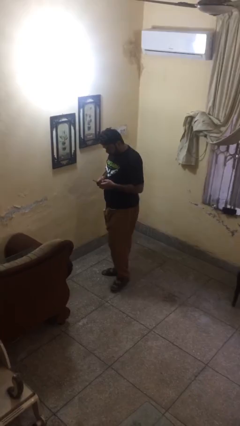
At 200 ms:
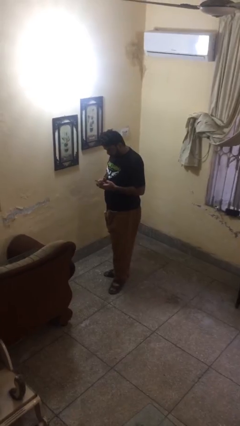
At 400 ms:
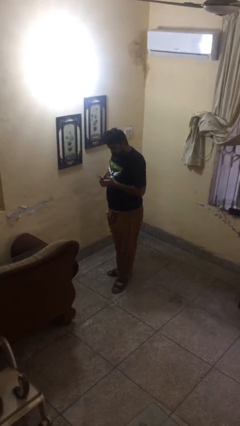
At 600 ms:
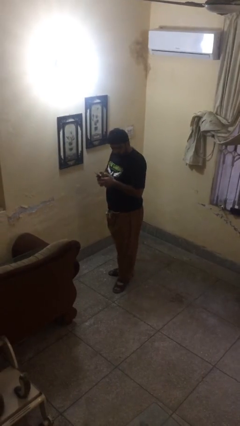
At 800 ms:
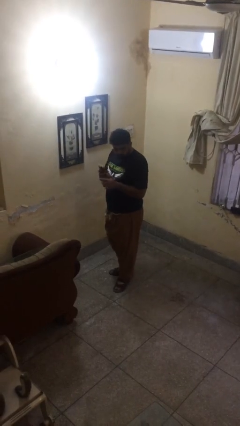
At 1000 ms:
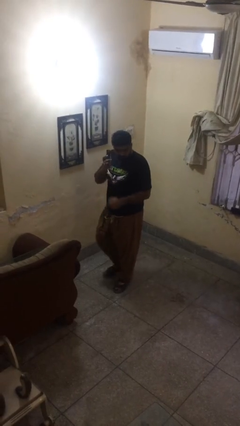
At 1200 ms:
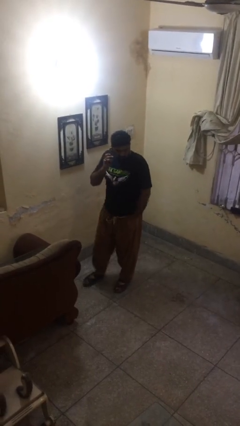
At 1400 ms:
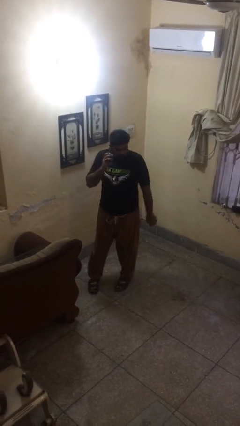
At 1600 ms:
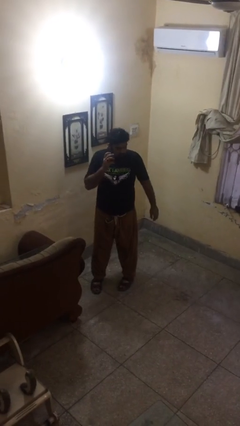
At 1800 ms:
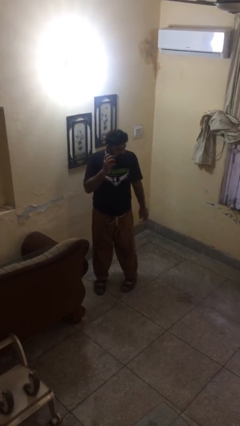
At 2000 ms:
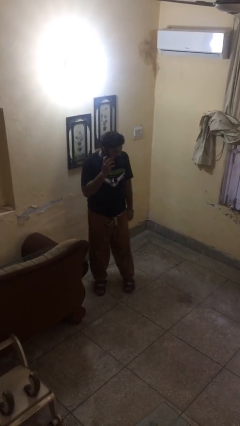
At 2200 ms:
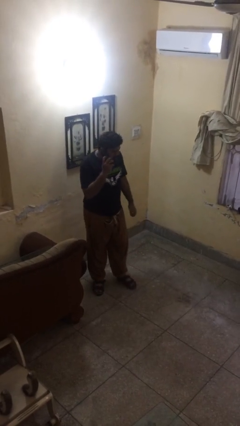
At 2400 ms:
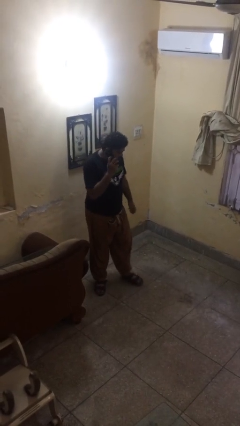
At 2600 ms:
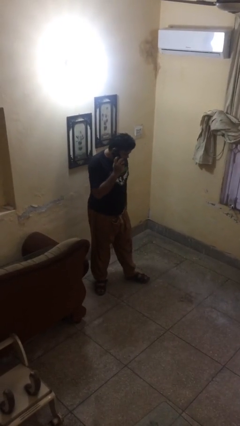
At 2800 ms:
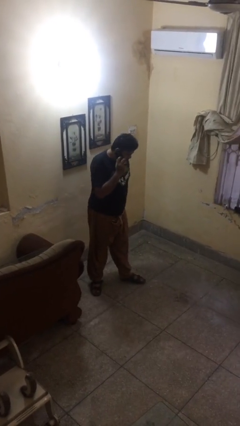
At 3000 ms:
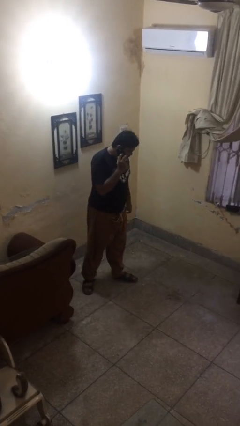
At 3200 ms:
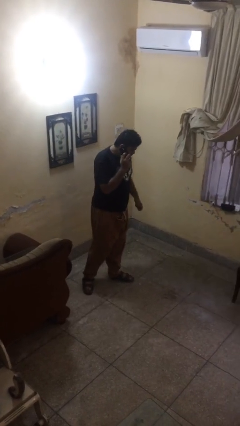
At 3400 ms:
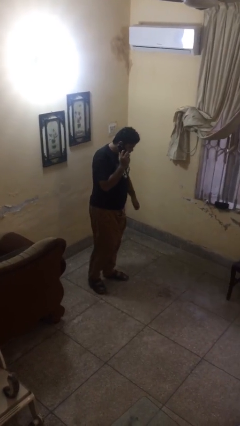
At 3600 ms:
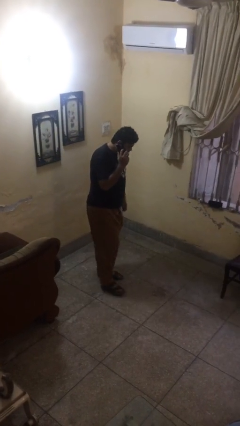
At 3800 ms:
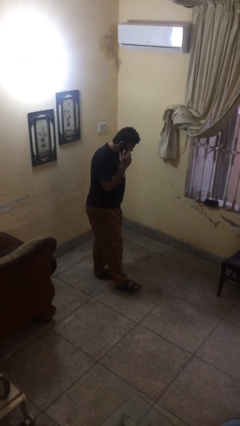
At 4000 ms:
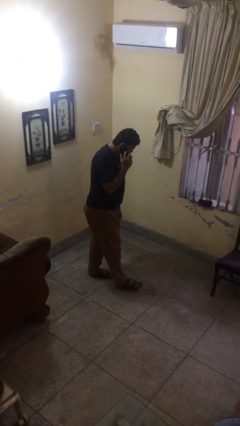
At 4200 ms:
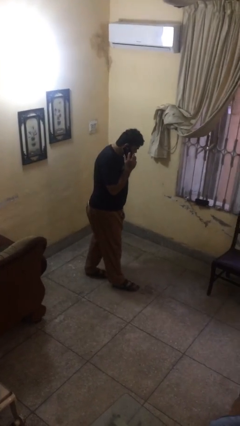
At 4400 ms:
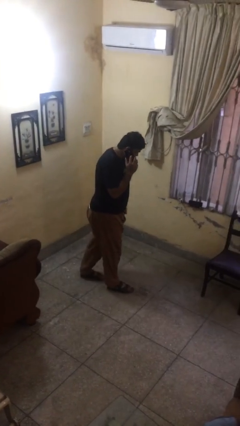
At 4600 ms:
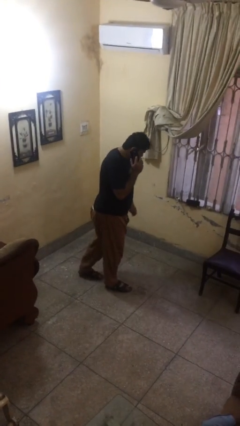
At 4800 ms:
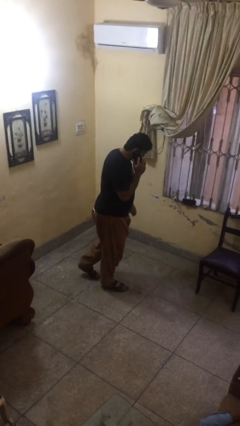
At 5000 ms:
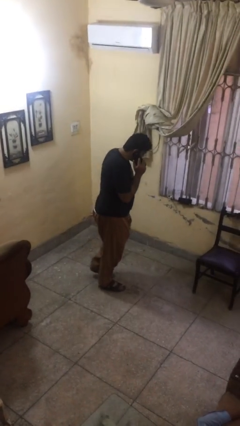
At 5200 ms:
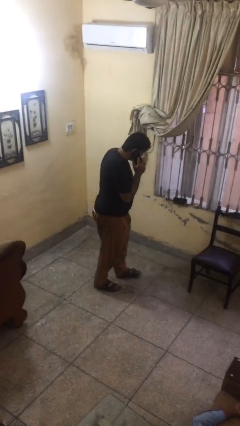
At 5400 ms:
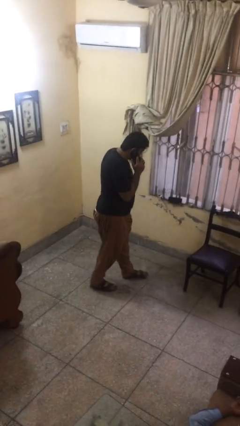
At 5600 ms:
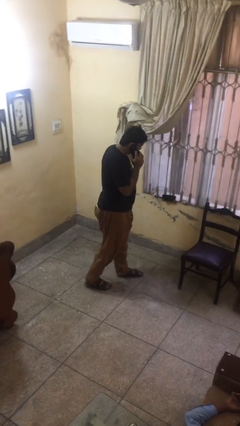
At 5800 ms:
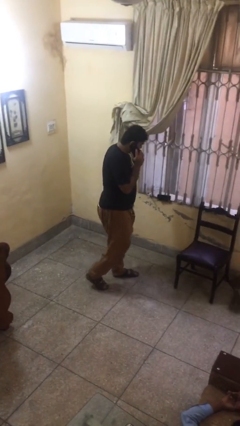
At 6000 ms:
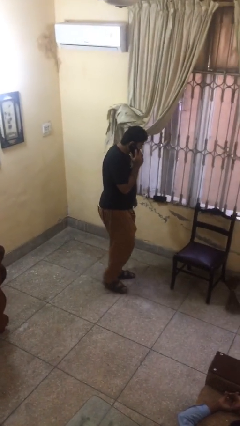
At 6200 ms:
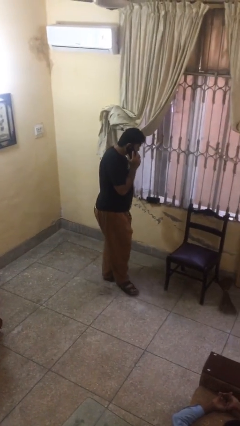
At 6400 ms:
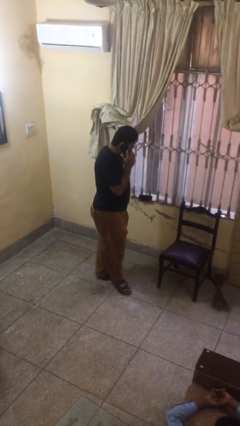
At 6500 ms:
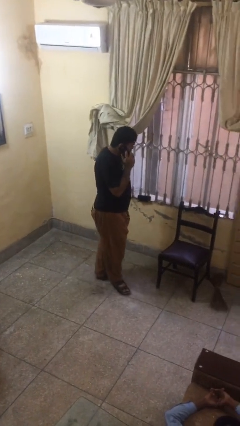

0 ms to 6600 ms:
person talks on phone

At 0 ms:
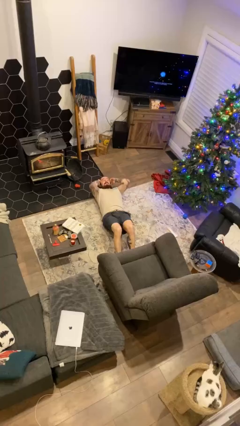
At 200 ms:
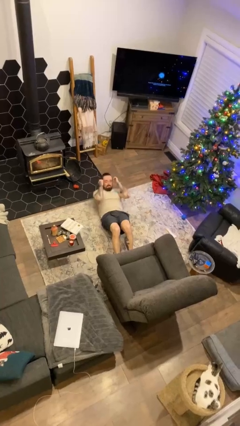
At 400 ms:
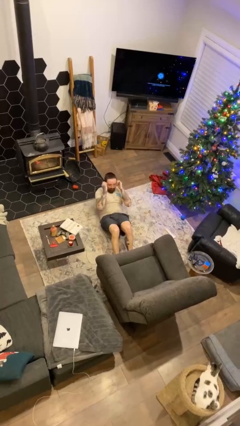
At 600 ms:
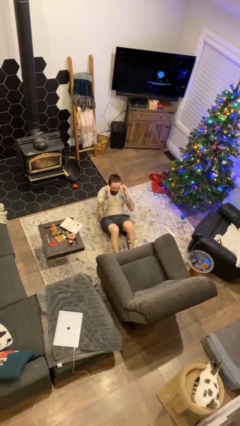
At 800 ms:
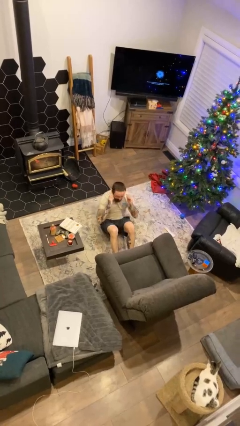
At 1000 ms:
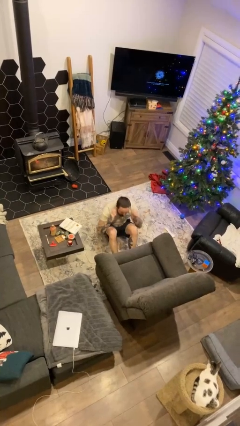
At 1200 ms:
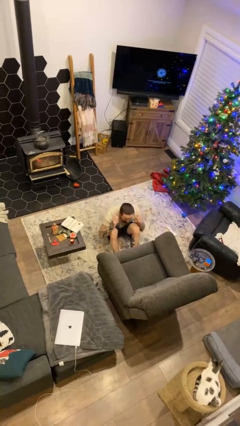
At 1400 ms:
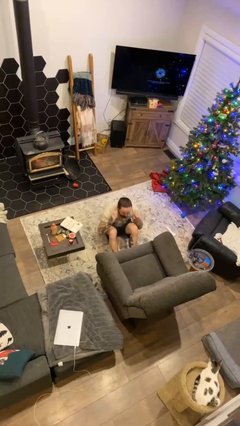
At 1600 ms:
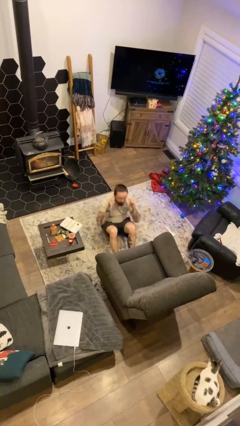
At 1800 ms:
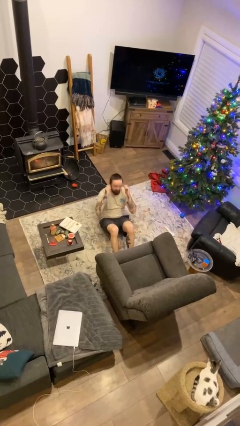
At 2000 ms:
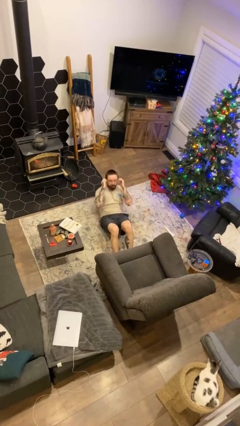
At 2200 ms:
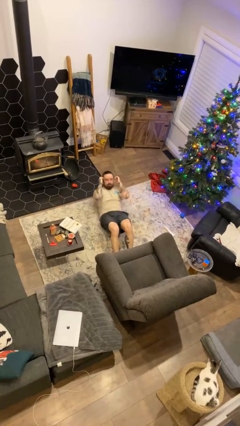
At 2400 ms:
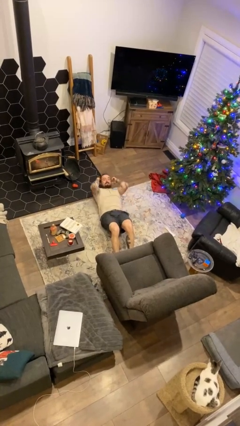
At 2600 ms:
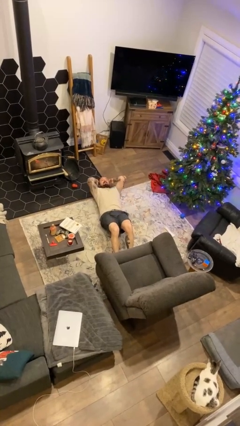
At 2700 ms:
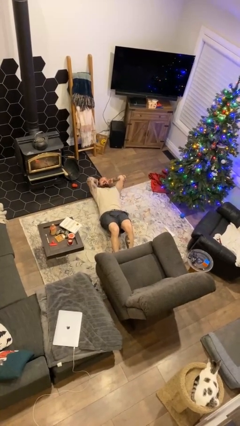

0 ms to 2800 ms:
person exercises with situp

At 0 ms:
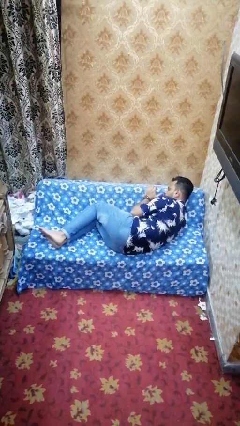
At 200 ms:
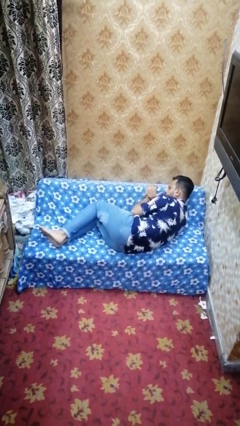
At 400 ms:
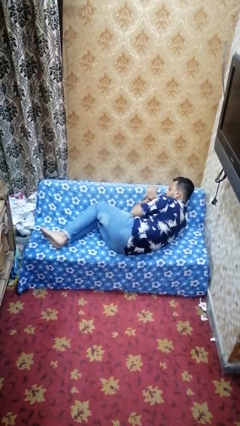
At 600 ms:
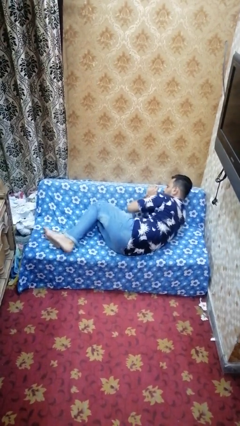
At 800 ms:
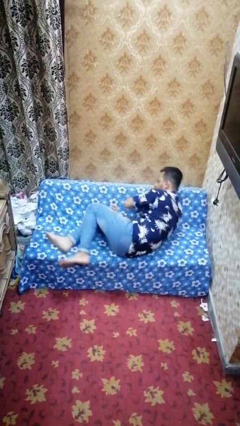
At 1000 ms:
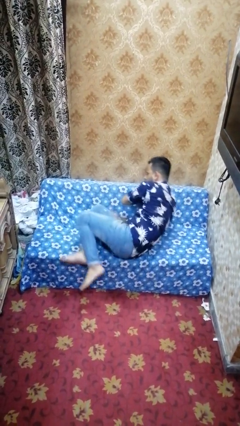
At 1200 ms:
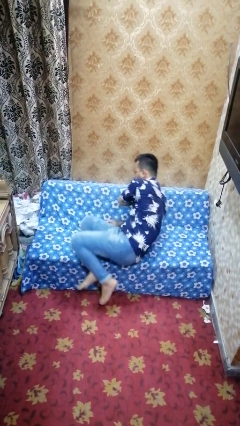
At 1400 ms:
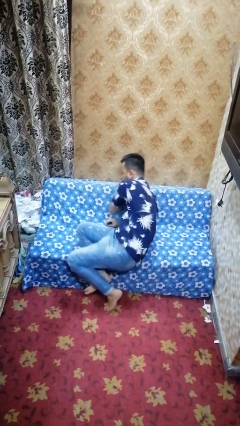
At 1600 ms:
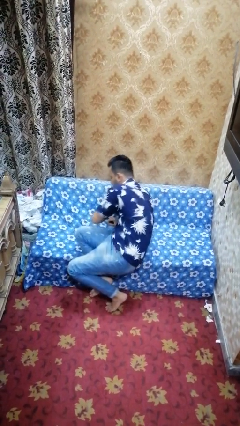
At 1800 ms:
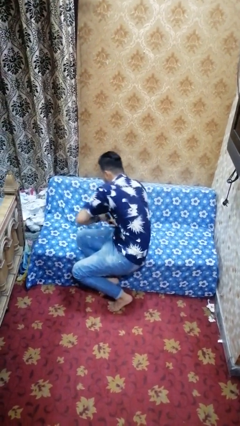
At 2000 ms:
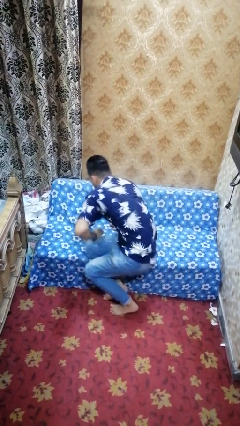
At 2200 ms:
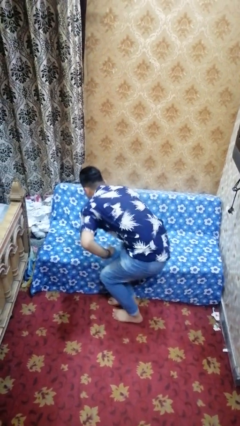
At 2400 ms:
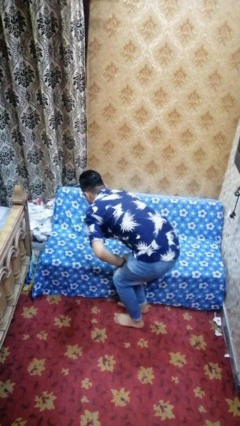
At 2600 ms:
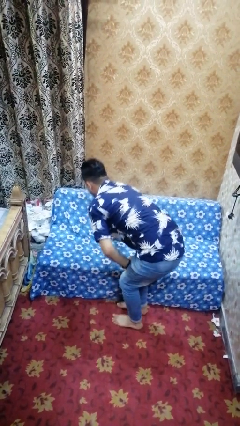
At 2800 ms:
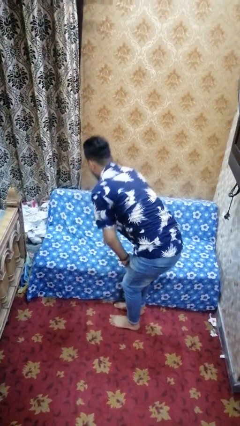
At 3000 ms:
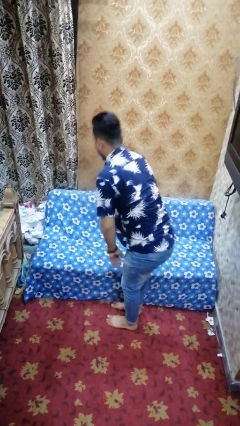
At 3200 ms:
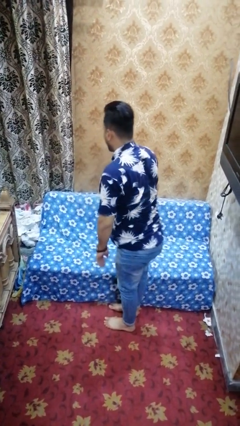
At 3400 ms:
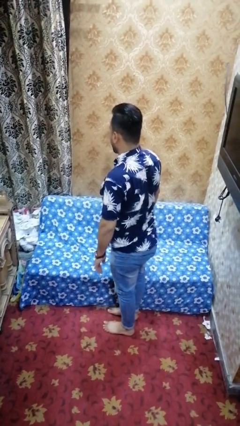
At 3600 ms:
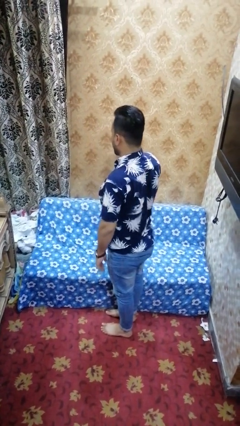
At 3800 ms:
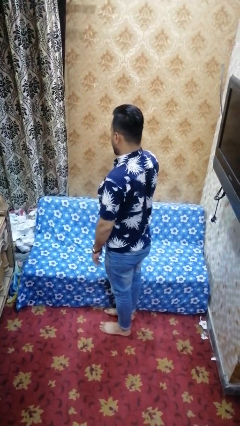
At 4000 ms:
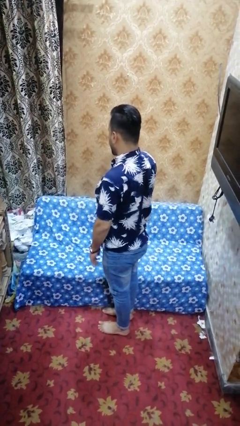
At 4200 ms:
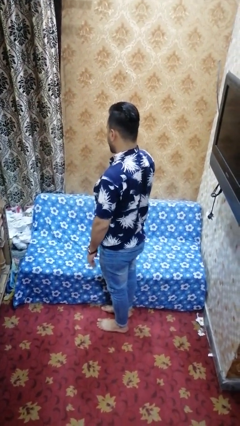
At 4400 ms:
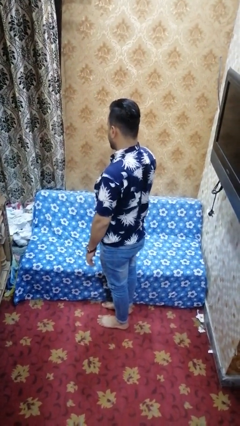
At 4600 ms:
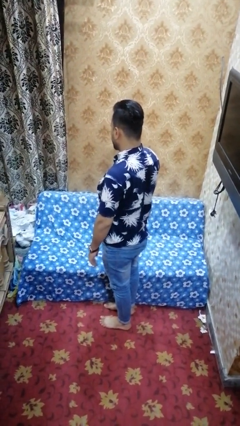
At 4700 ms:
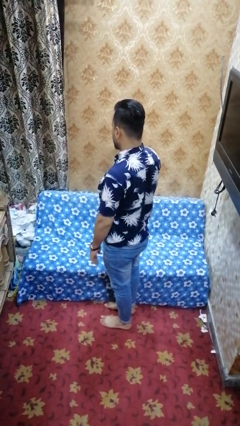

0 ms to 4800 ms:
person stands up

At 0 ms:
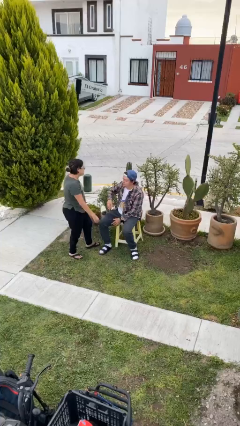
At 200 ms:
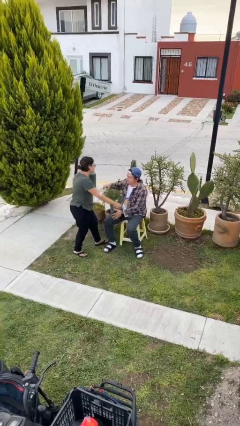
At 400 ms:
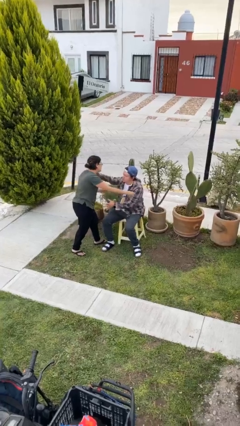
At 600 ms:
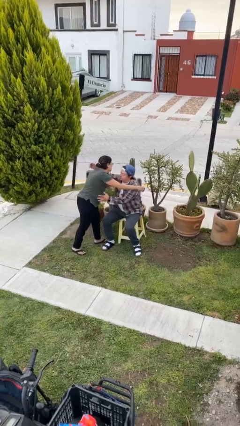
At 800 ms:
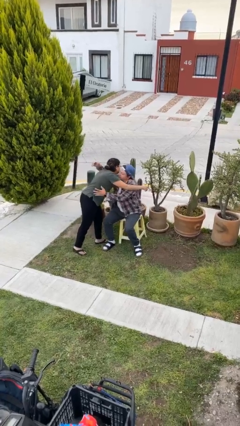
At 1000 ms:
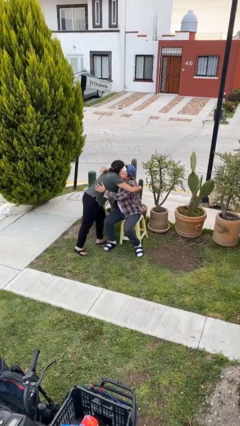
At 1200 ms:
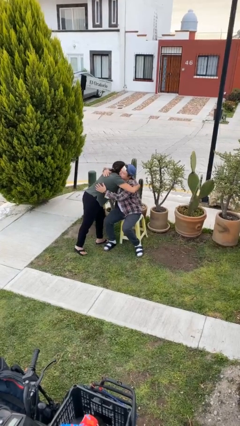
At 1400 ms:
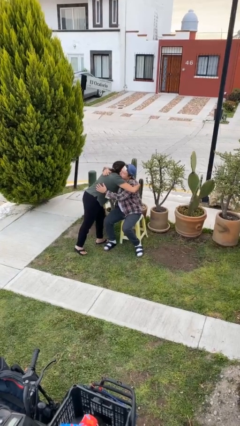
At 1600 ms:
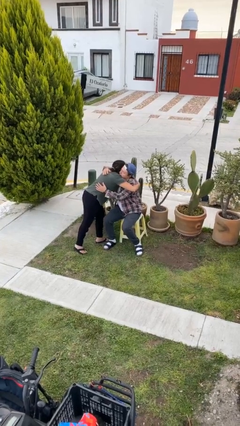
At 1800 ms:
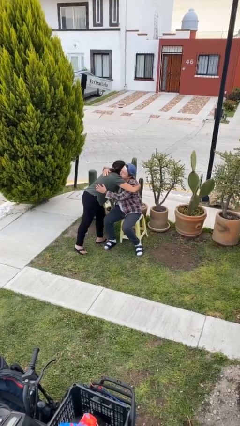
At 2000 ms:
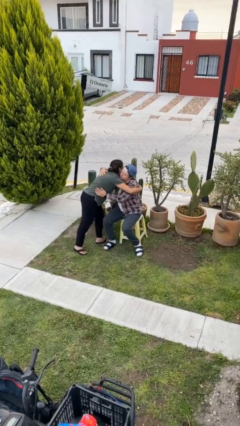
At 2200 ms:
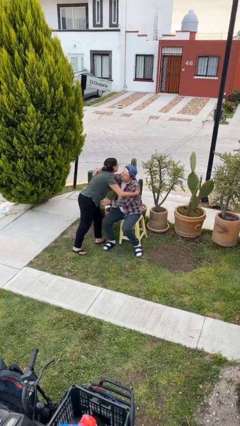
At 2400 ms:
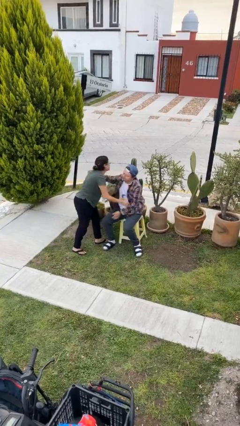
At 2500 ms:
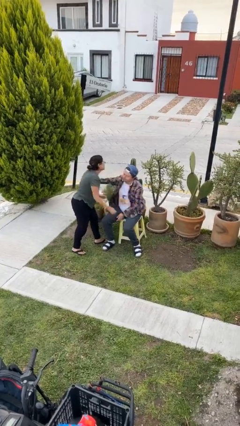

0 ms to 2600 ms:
person embraces person

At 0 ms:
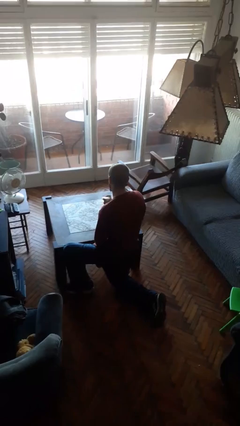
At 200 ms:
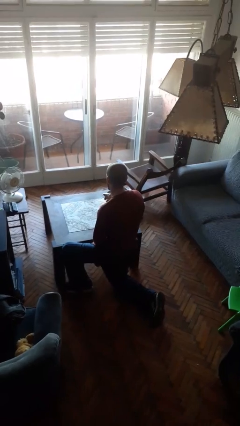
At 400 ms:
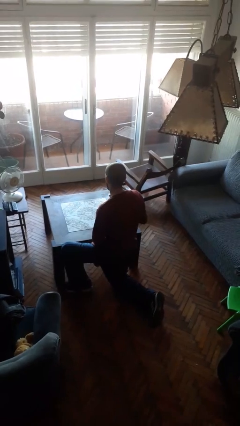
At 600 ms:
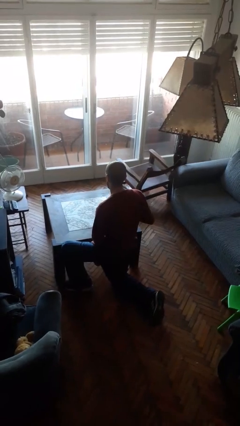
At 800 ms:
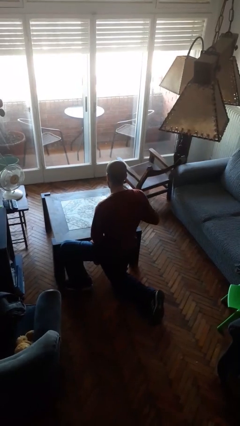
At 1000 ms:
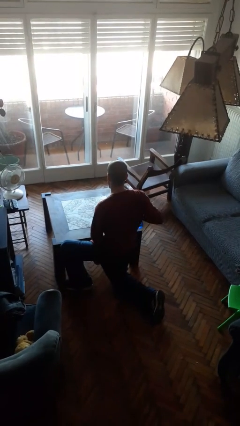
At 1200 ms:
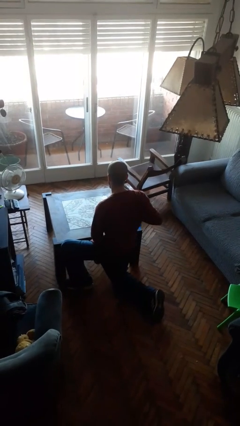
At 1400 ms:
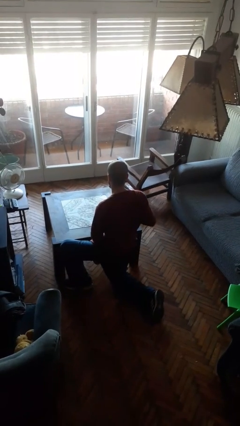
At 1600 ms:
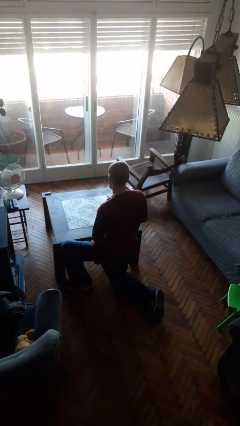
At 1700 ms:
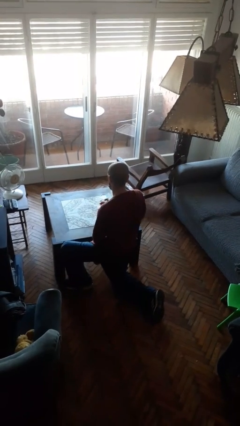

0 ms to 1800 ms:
person sprays from bottle
